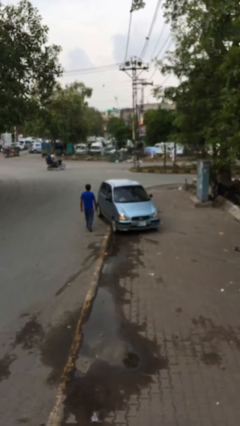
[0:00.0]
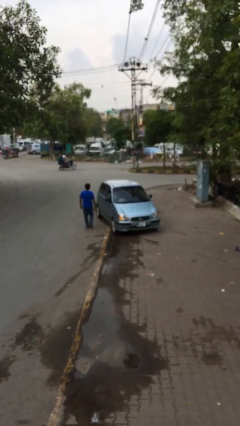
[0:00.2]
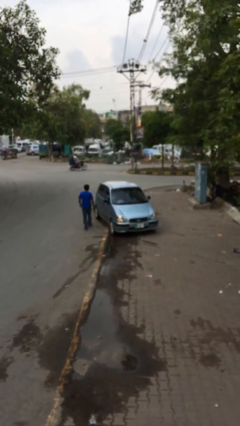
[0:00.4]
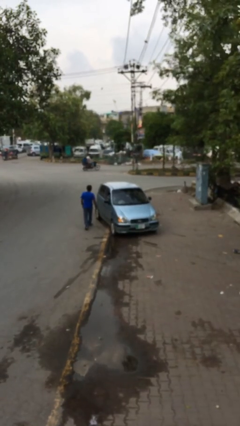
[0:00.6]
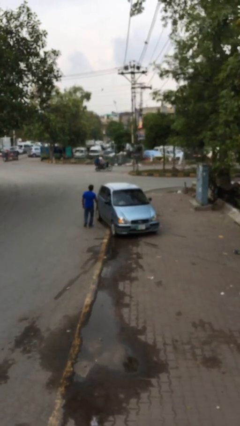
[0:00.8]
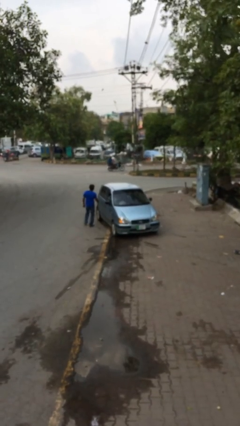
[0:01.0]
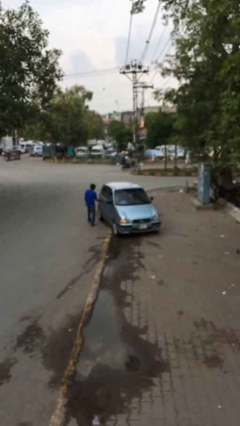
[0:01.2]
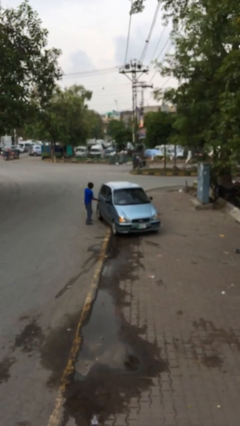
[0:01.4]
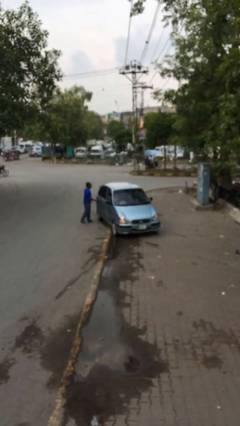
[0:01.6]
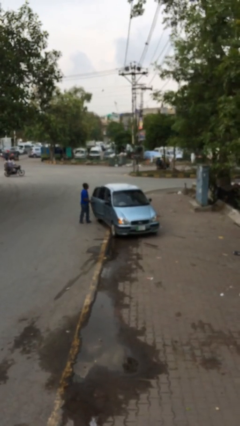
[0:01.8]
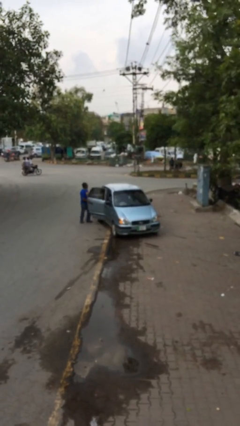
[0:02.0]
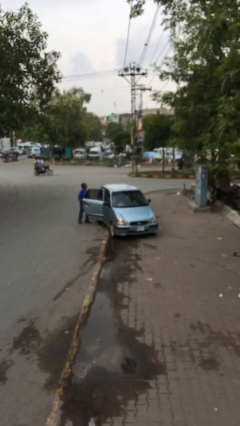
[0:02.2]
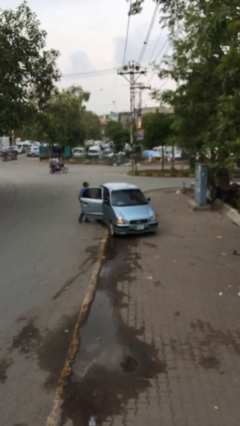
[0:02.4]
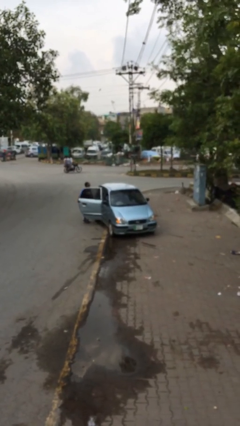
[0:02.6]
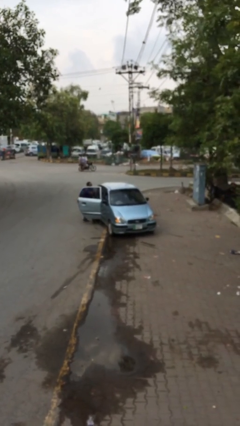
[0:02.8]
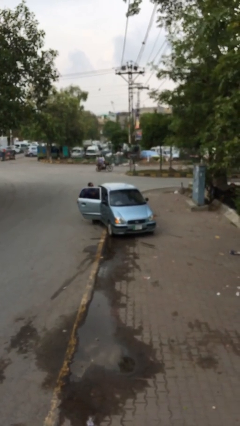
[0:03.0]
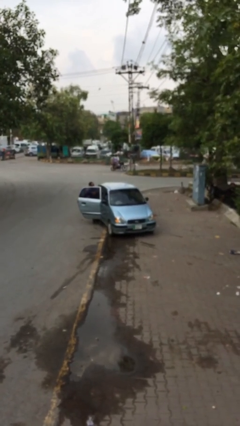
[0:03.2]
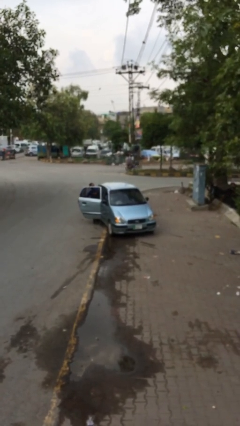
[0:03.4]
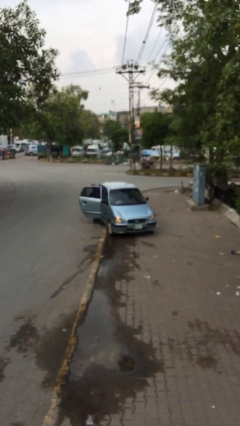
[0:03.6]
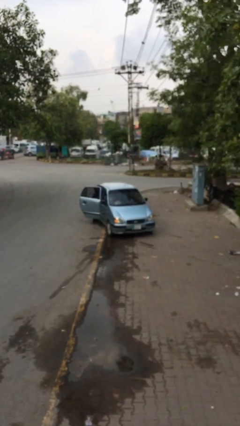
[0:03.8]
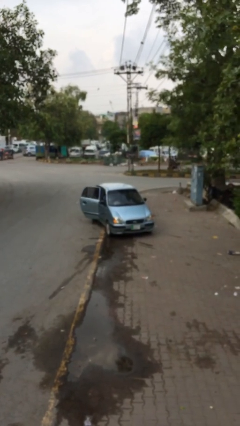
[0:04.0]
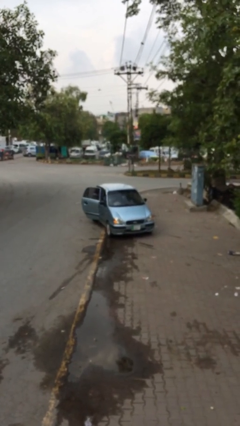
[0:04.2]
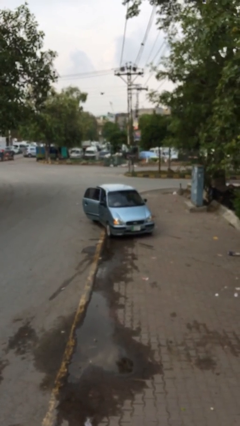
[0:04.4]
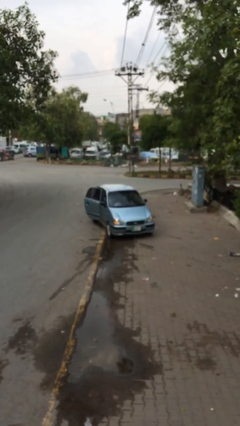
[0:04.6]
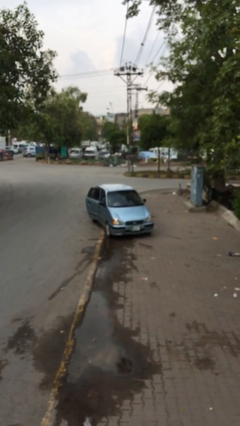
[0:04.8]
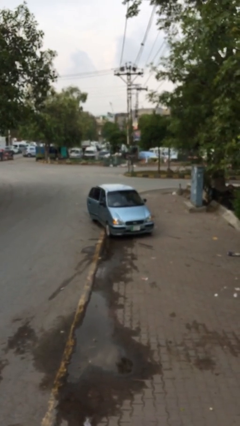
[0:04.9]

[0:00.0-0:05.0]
car picks up person

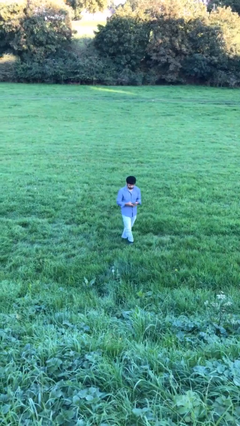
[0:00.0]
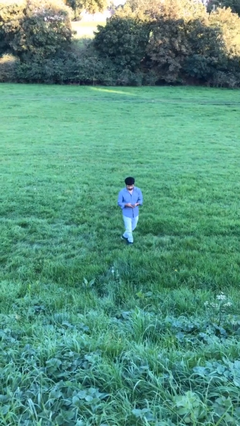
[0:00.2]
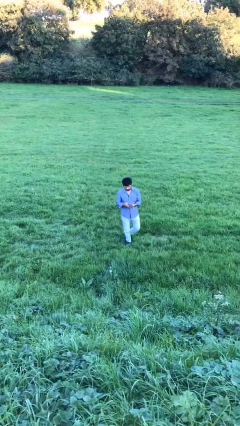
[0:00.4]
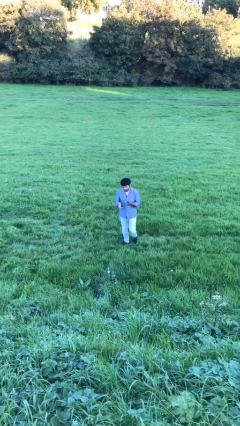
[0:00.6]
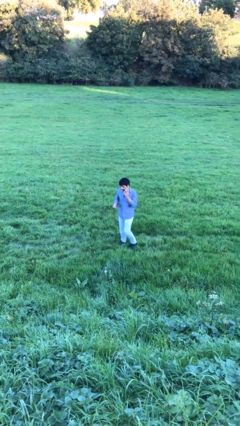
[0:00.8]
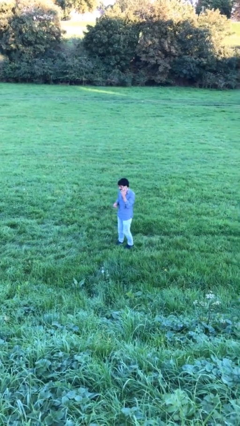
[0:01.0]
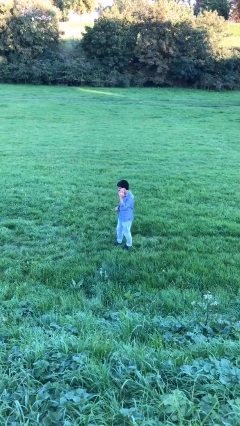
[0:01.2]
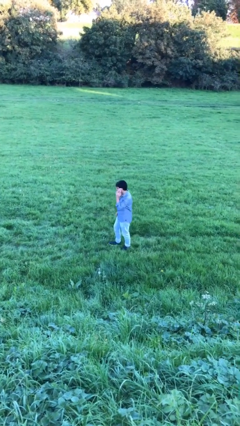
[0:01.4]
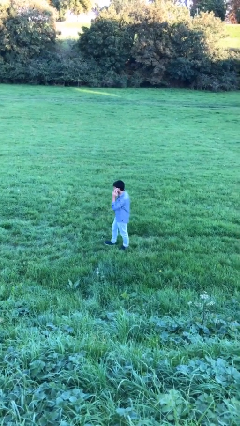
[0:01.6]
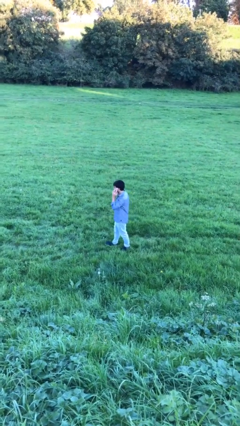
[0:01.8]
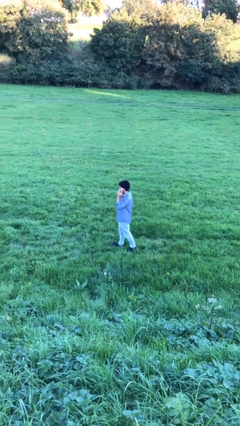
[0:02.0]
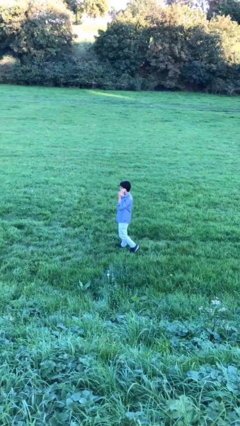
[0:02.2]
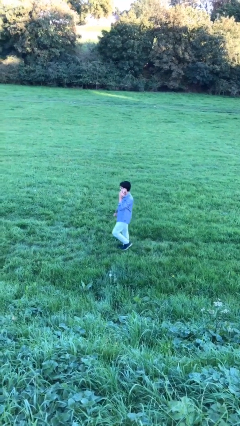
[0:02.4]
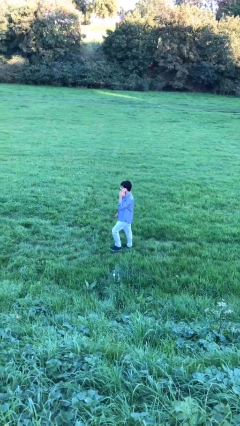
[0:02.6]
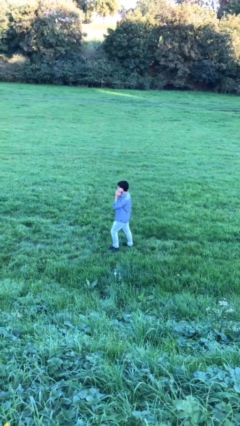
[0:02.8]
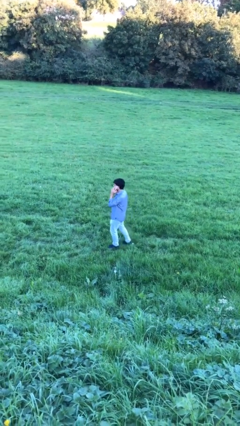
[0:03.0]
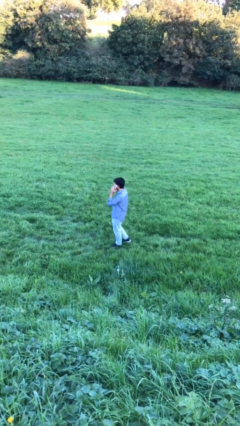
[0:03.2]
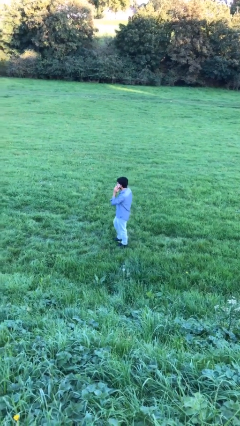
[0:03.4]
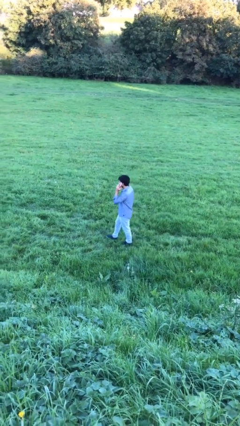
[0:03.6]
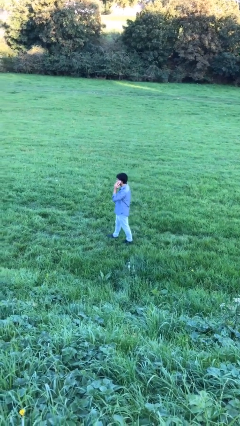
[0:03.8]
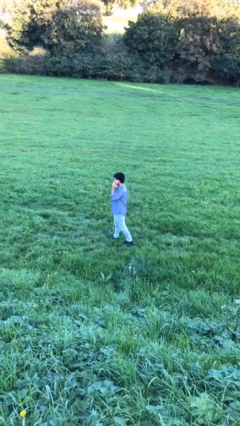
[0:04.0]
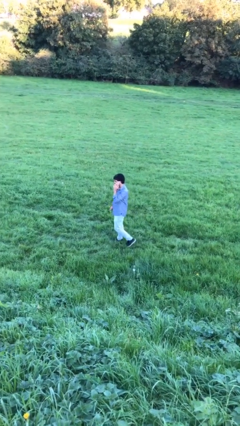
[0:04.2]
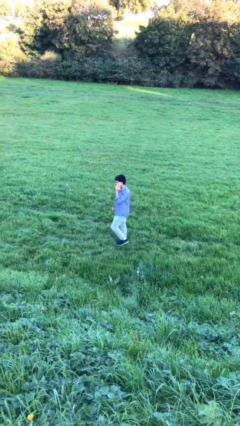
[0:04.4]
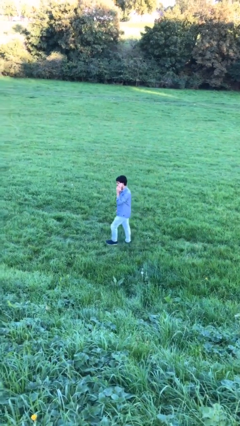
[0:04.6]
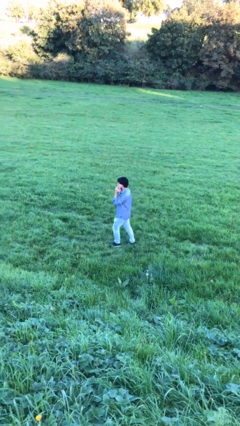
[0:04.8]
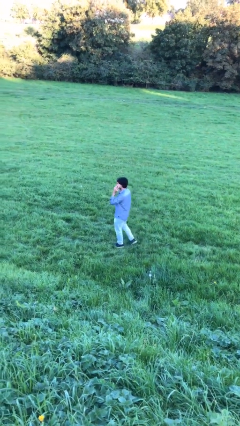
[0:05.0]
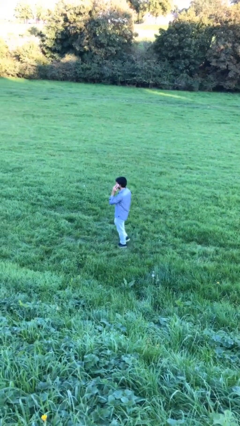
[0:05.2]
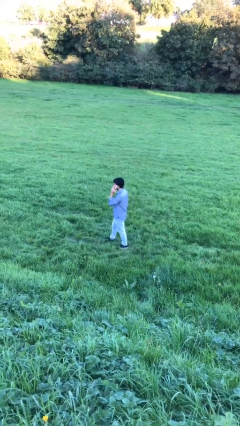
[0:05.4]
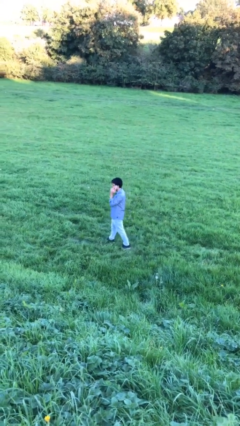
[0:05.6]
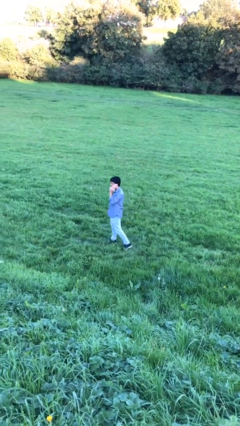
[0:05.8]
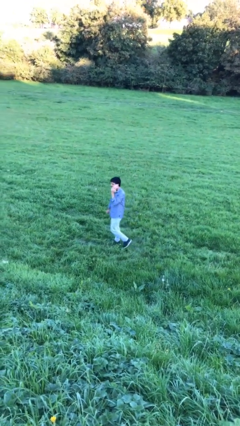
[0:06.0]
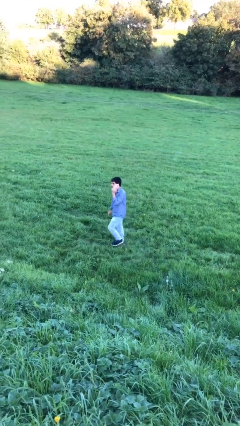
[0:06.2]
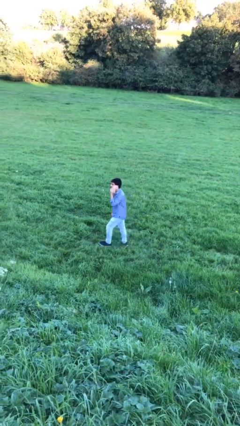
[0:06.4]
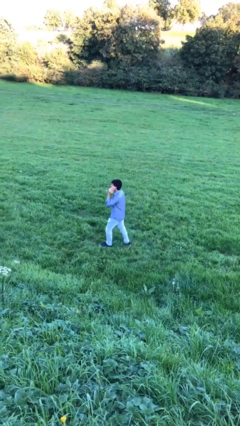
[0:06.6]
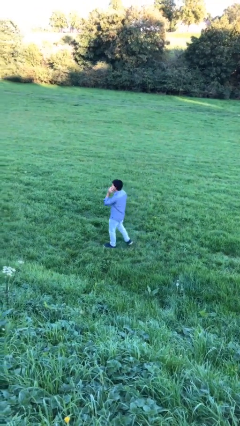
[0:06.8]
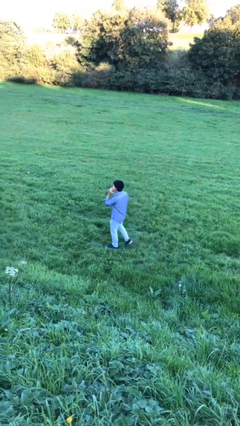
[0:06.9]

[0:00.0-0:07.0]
person talks on phone

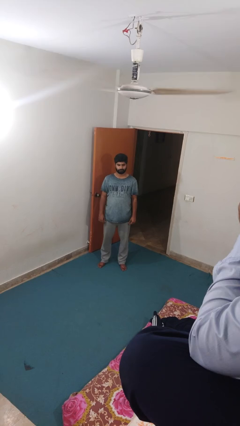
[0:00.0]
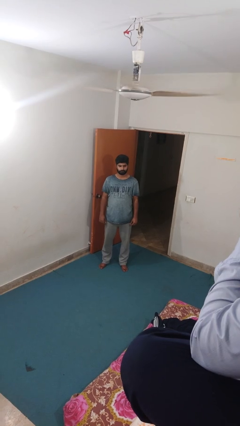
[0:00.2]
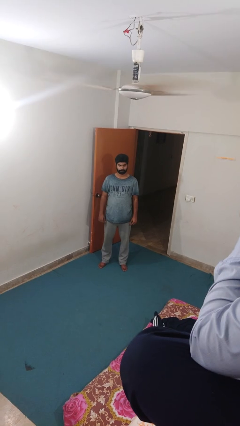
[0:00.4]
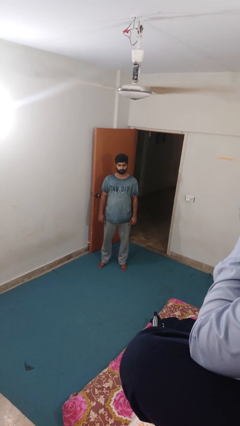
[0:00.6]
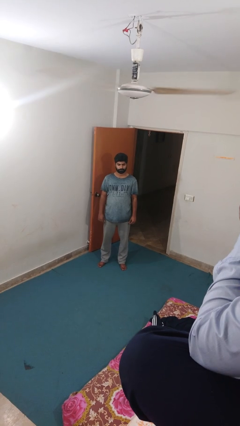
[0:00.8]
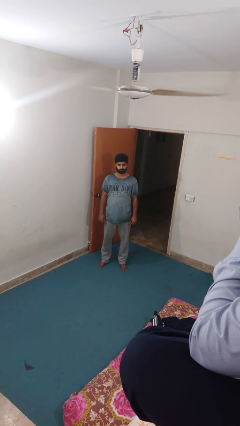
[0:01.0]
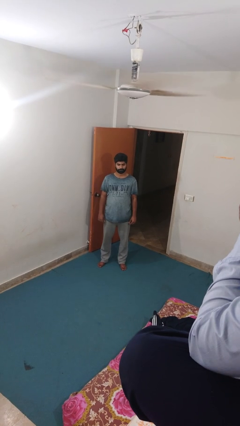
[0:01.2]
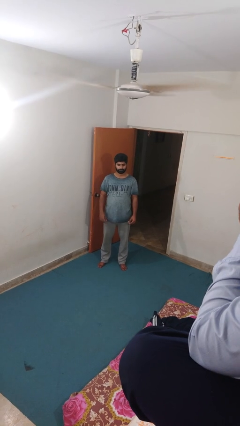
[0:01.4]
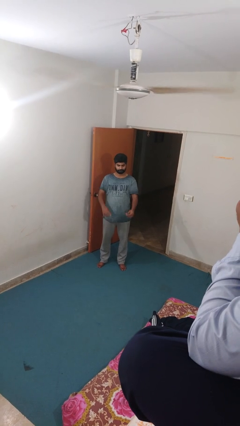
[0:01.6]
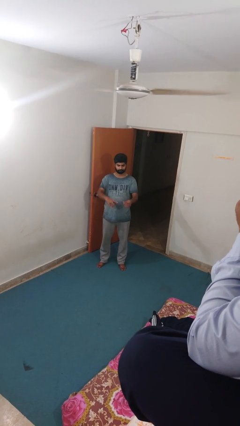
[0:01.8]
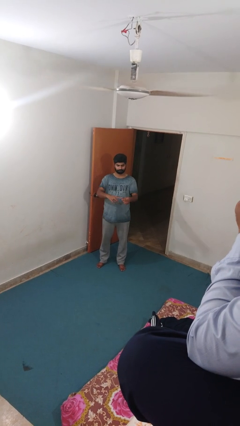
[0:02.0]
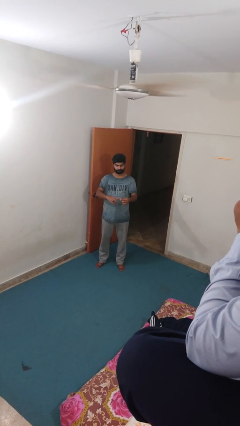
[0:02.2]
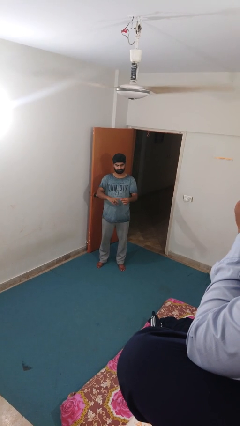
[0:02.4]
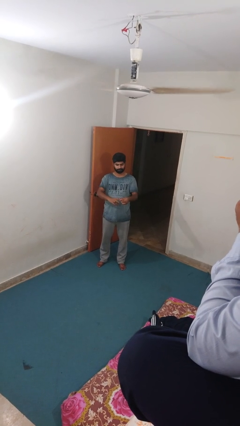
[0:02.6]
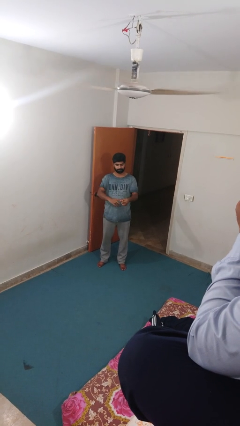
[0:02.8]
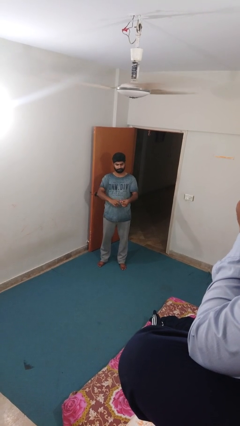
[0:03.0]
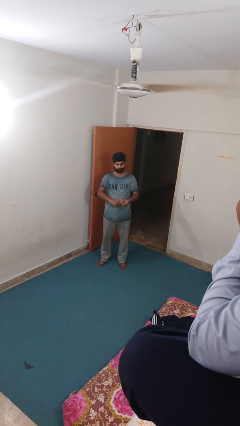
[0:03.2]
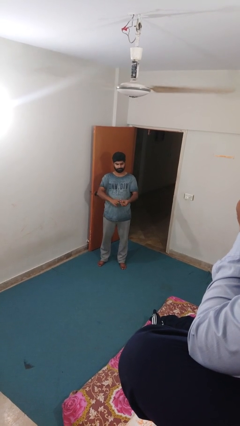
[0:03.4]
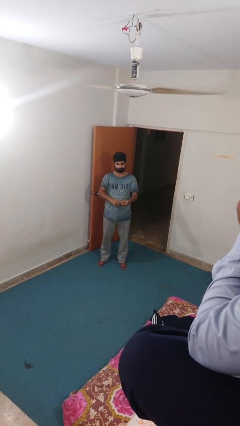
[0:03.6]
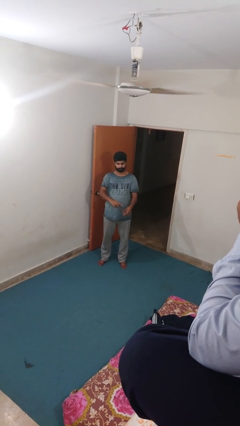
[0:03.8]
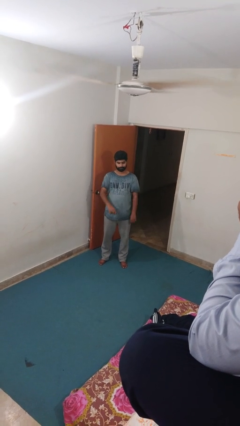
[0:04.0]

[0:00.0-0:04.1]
person puts on ring

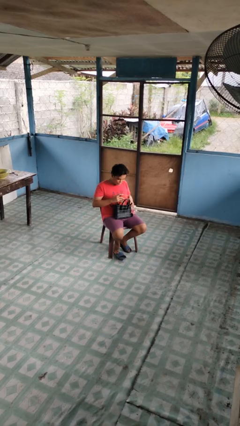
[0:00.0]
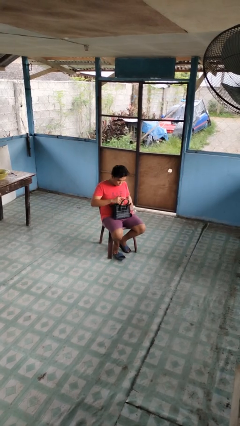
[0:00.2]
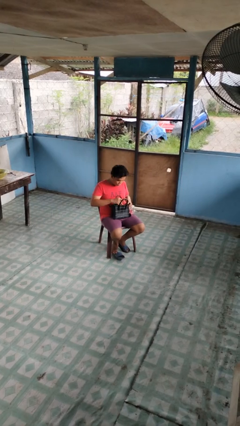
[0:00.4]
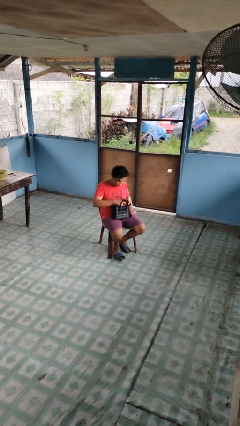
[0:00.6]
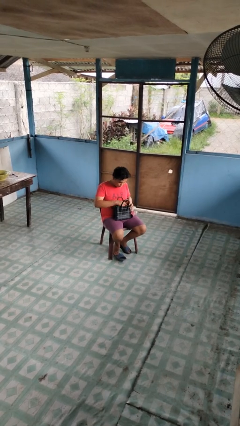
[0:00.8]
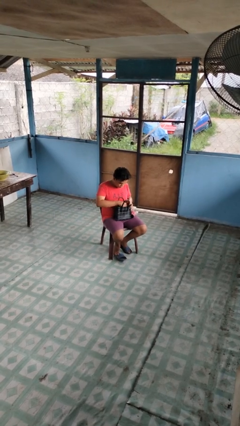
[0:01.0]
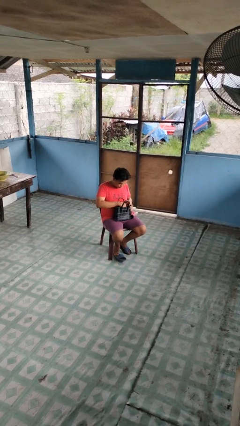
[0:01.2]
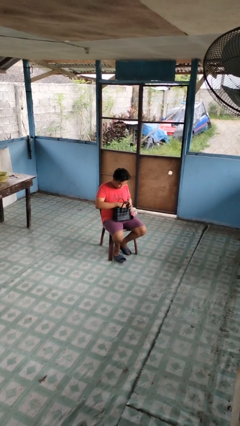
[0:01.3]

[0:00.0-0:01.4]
person puts object into purse
